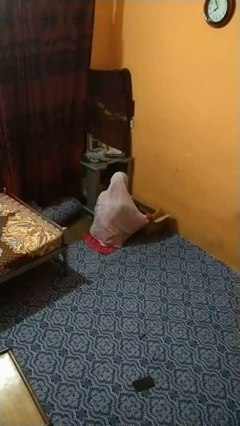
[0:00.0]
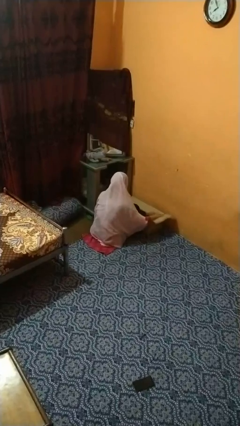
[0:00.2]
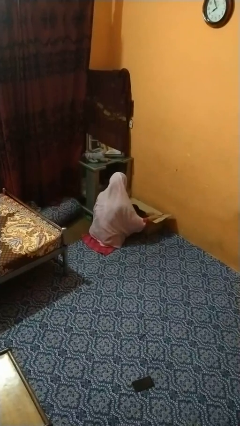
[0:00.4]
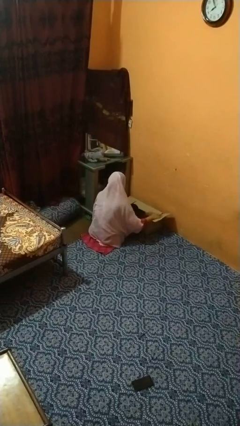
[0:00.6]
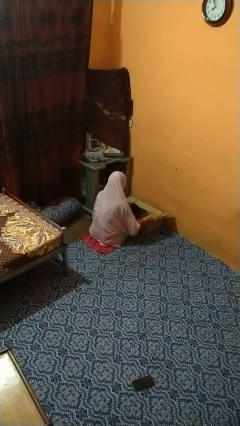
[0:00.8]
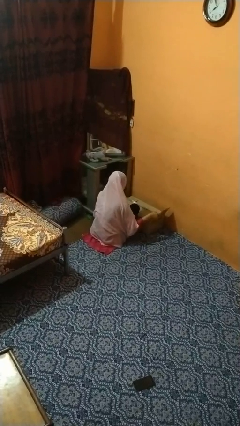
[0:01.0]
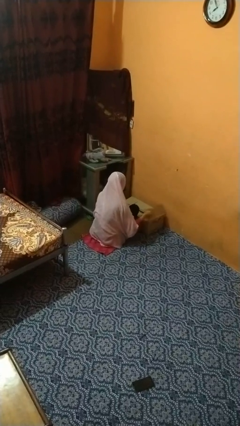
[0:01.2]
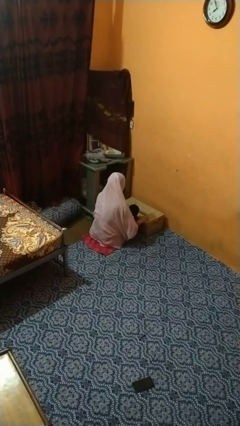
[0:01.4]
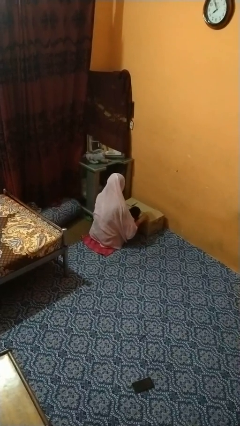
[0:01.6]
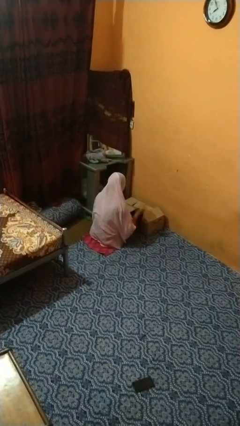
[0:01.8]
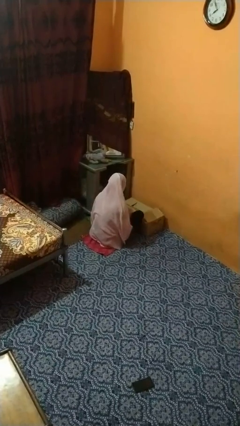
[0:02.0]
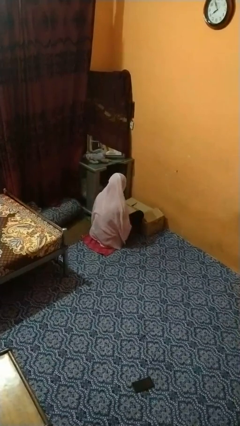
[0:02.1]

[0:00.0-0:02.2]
person closes box

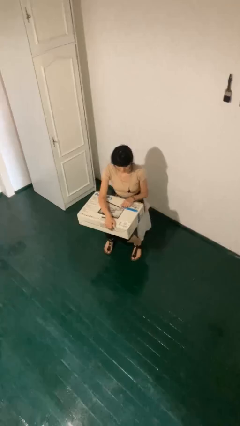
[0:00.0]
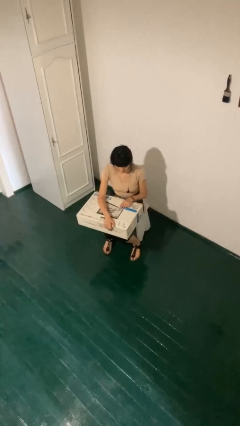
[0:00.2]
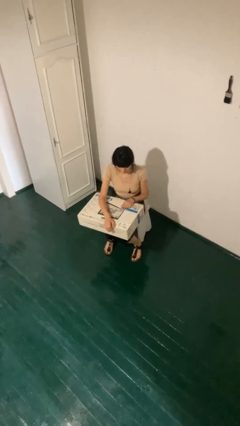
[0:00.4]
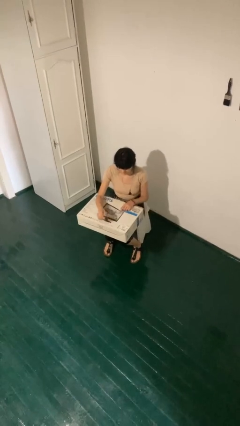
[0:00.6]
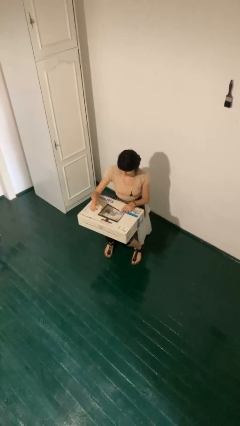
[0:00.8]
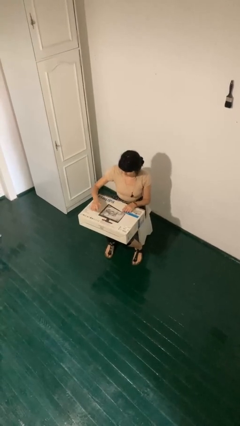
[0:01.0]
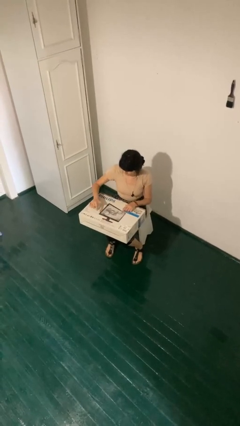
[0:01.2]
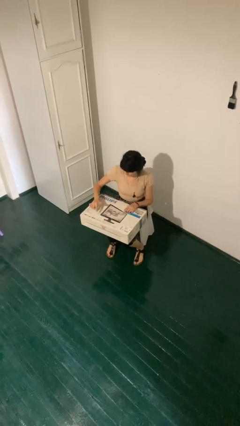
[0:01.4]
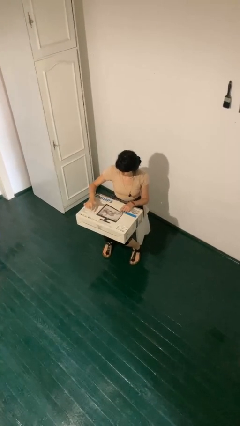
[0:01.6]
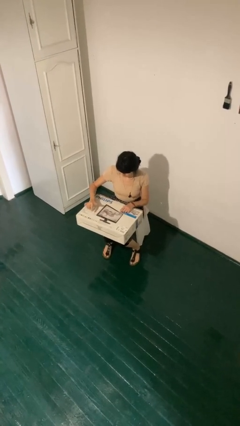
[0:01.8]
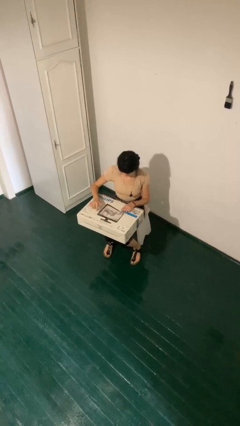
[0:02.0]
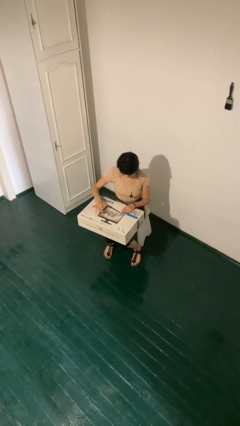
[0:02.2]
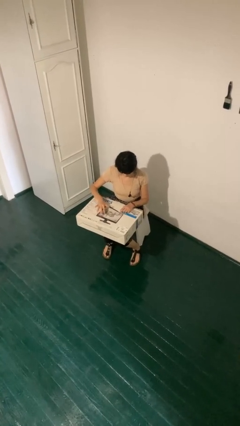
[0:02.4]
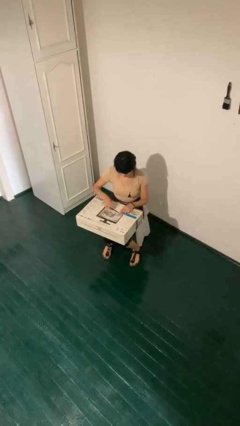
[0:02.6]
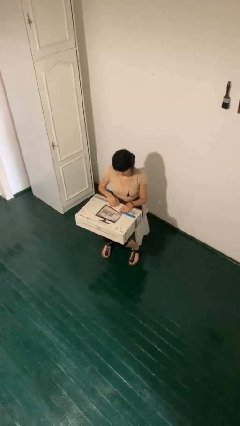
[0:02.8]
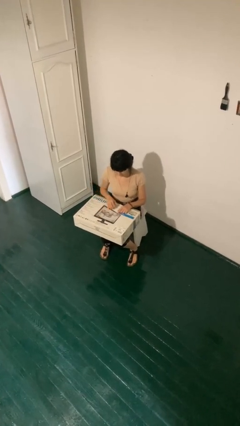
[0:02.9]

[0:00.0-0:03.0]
person taps object with finger

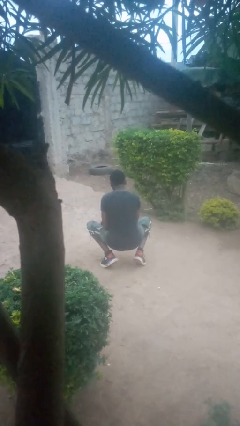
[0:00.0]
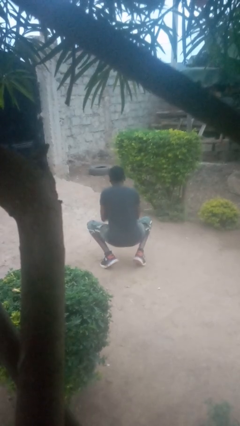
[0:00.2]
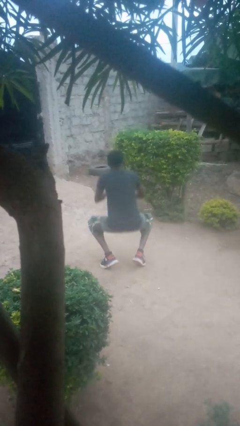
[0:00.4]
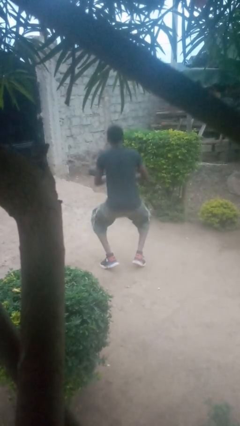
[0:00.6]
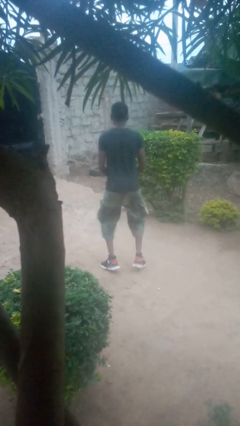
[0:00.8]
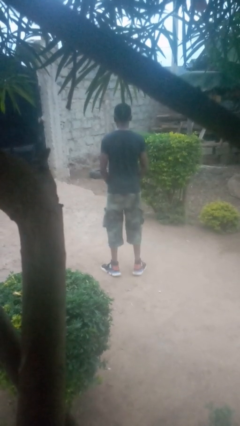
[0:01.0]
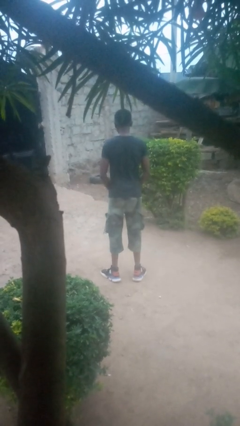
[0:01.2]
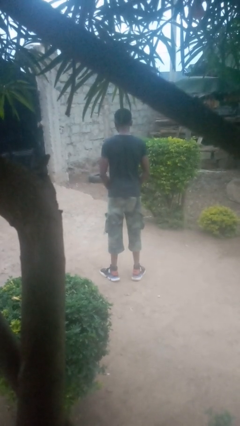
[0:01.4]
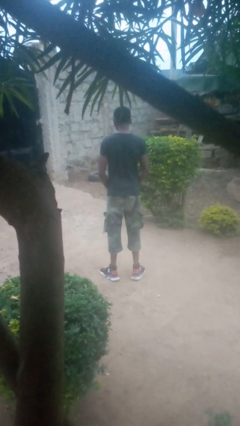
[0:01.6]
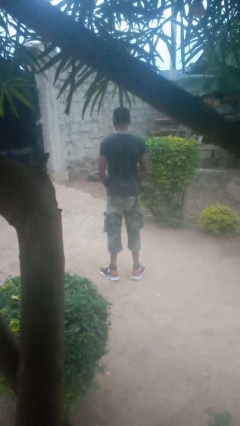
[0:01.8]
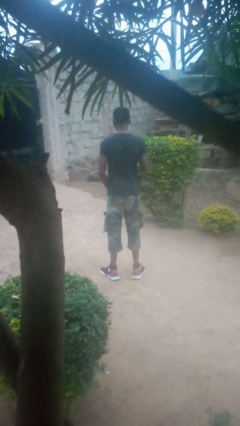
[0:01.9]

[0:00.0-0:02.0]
person stands up

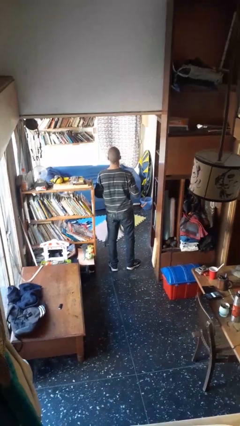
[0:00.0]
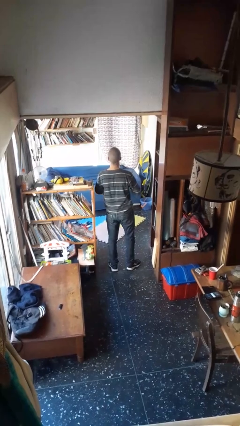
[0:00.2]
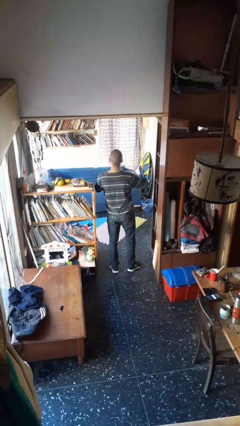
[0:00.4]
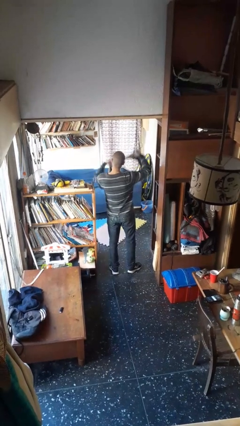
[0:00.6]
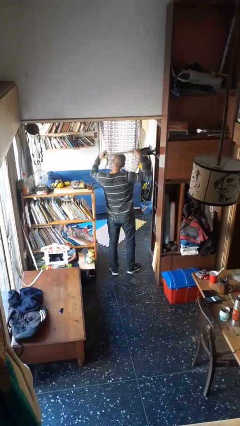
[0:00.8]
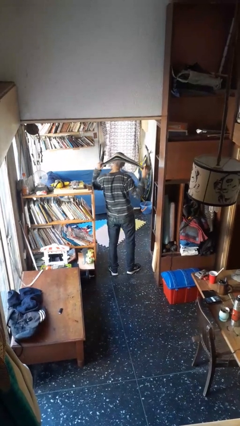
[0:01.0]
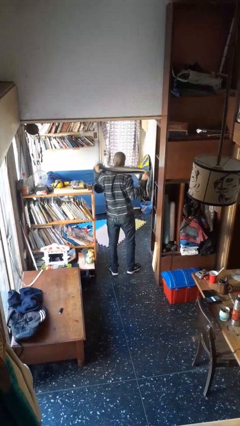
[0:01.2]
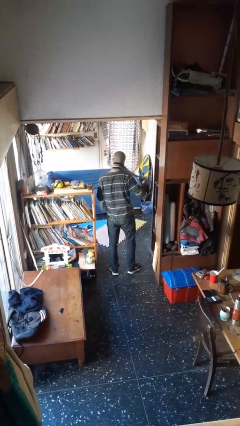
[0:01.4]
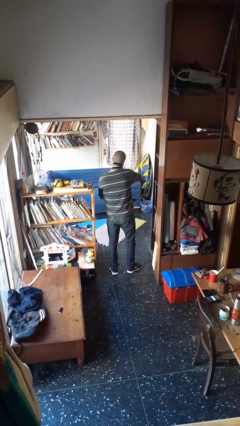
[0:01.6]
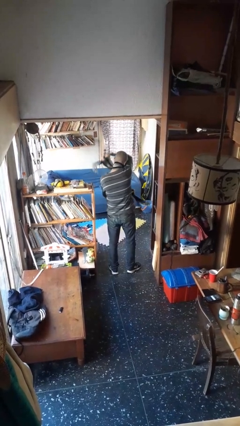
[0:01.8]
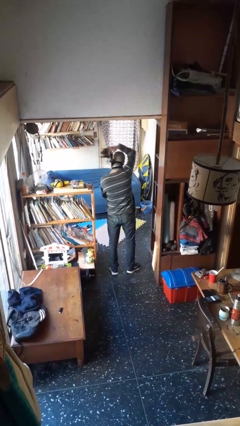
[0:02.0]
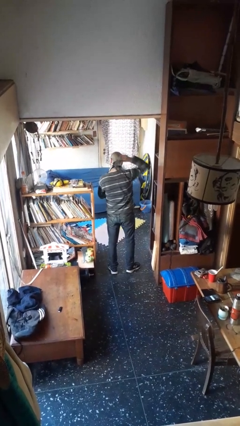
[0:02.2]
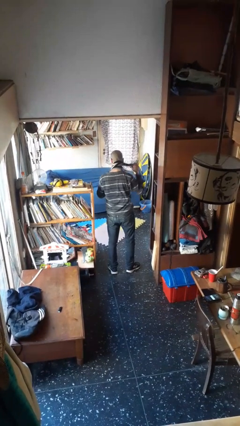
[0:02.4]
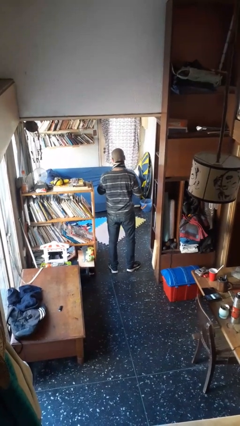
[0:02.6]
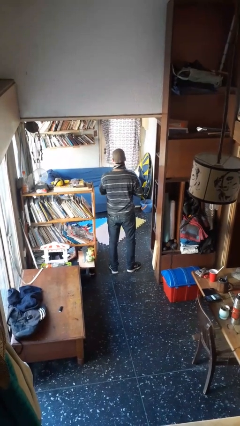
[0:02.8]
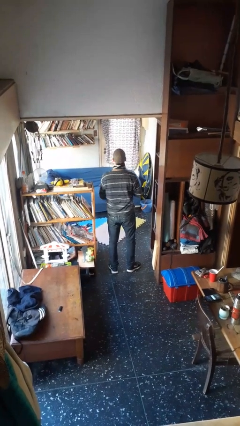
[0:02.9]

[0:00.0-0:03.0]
person puts on scarf

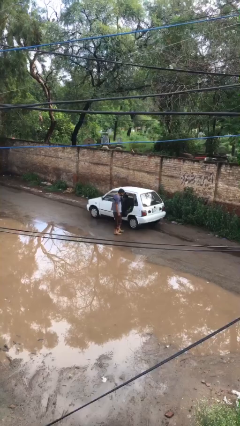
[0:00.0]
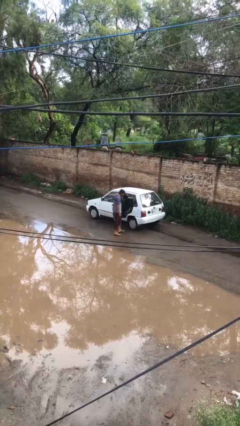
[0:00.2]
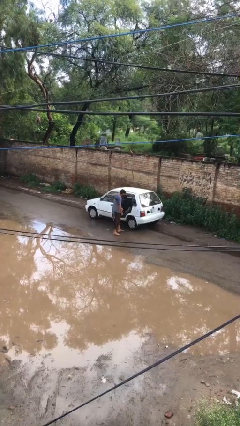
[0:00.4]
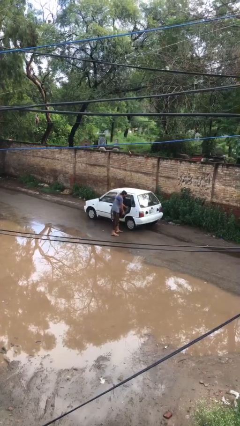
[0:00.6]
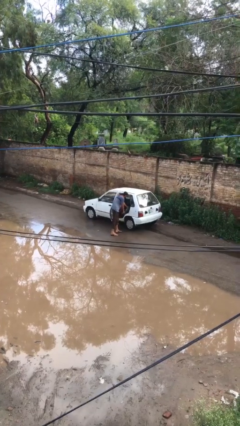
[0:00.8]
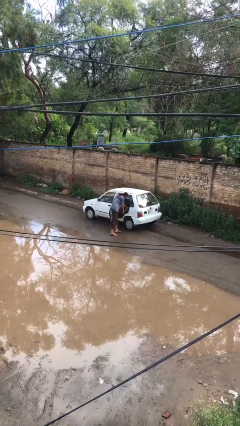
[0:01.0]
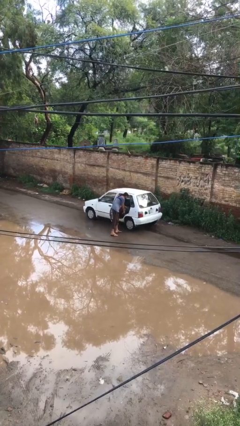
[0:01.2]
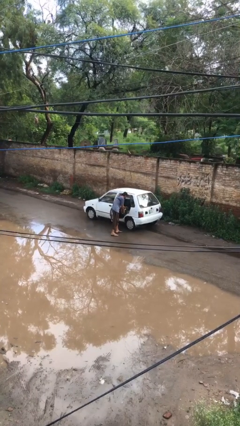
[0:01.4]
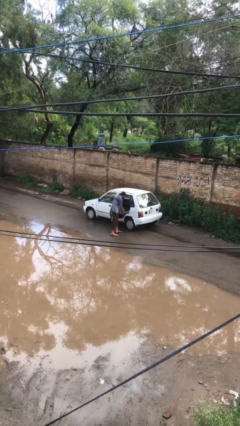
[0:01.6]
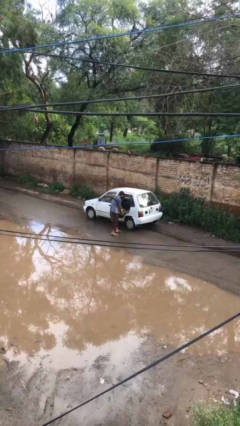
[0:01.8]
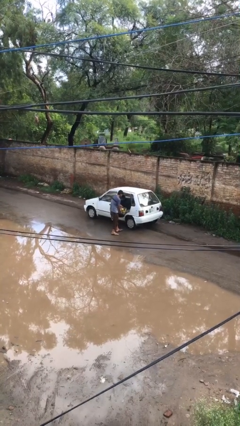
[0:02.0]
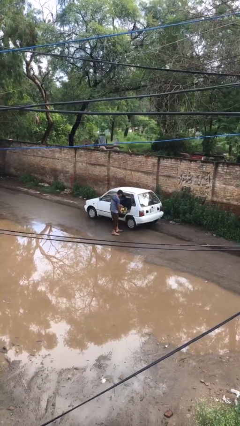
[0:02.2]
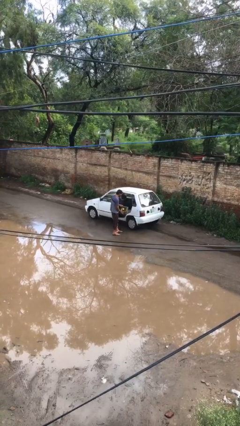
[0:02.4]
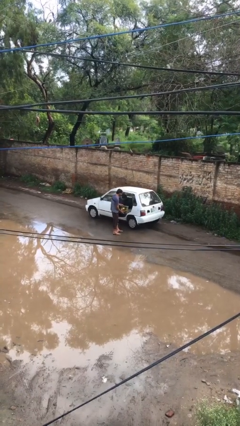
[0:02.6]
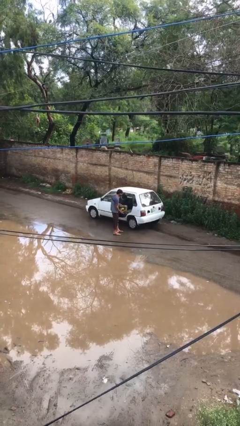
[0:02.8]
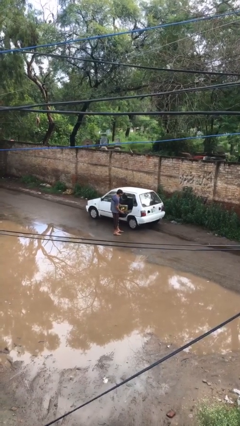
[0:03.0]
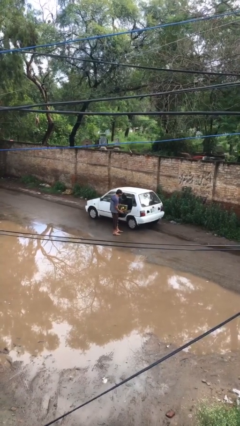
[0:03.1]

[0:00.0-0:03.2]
person unloads car

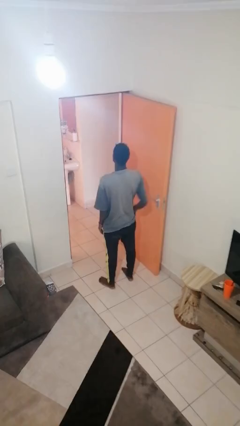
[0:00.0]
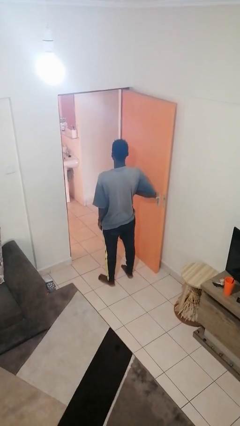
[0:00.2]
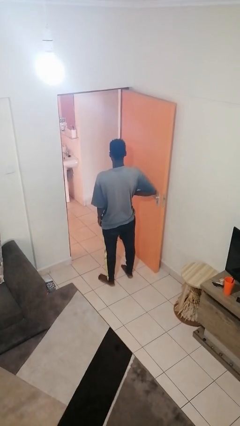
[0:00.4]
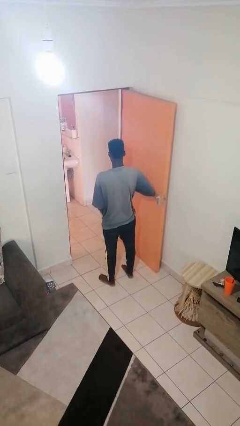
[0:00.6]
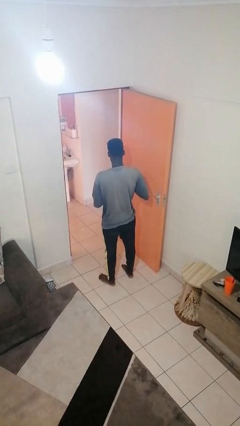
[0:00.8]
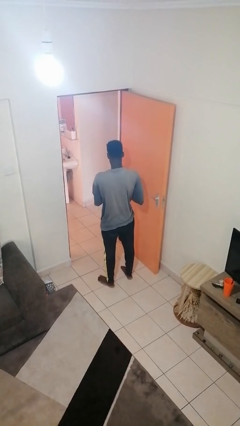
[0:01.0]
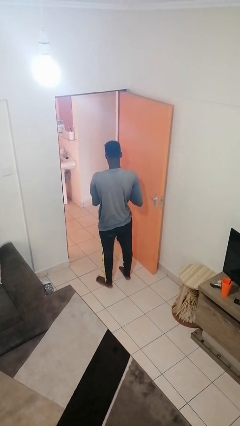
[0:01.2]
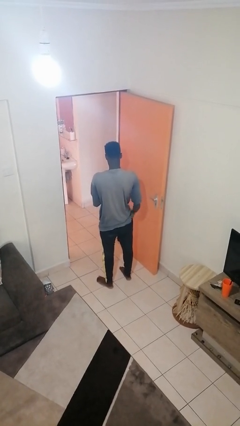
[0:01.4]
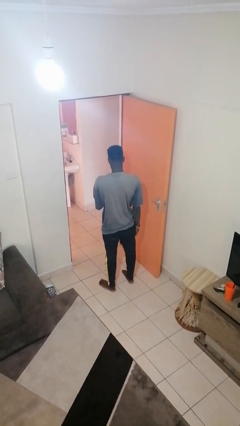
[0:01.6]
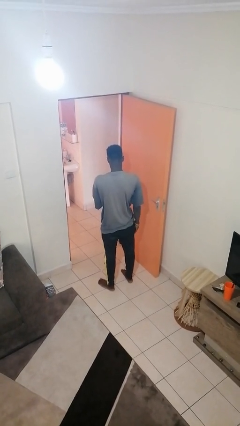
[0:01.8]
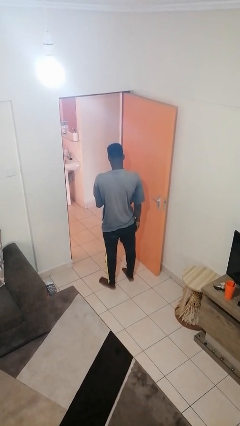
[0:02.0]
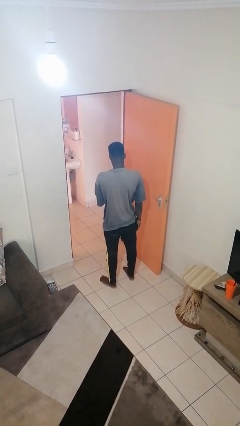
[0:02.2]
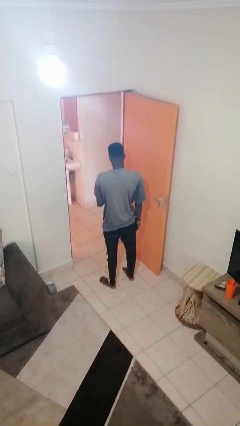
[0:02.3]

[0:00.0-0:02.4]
person takes phone from pocket

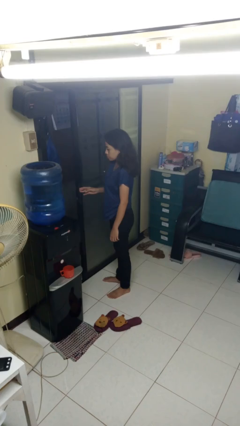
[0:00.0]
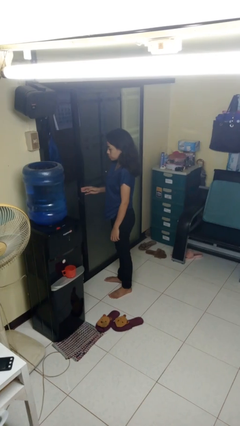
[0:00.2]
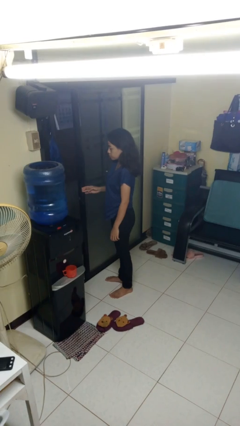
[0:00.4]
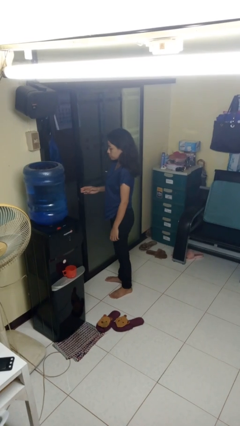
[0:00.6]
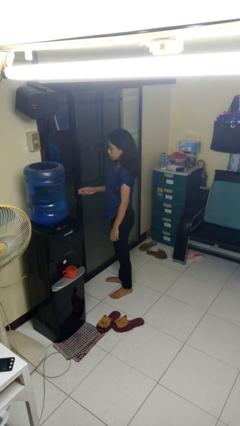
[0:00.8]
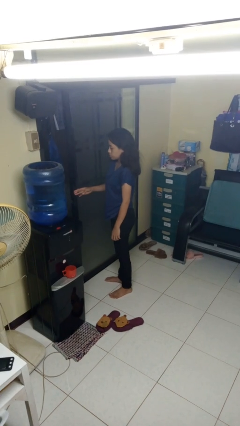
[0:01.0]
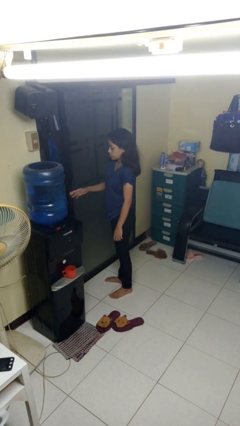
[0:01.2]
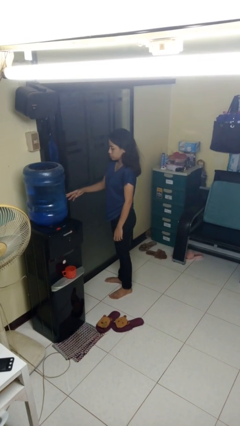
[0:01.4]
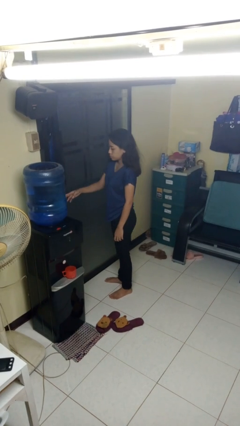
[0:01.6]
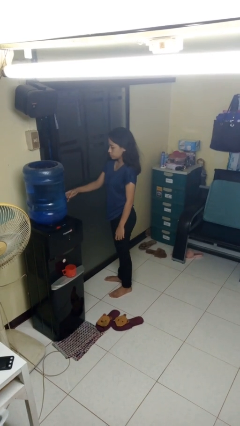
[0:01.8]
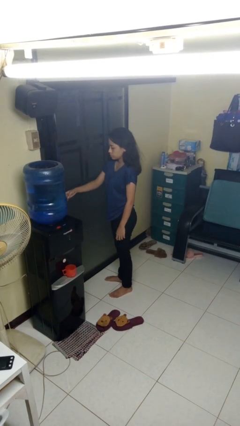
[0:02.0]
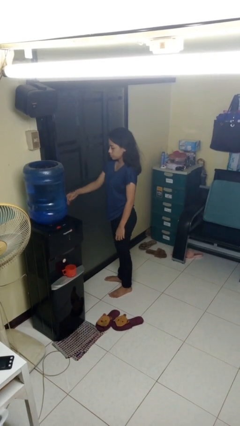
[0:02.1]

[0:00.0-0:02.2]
person closes sliding door
